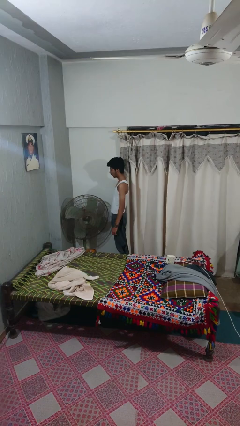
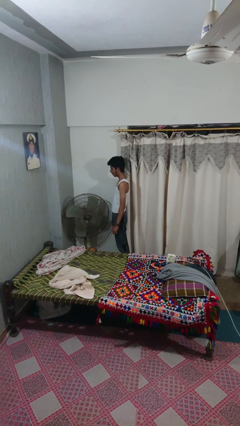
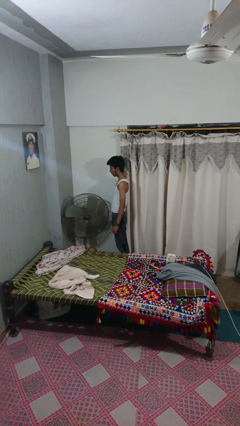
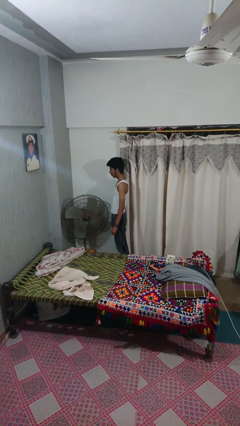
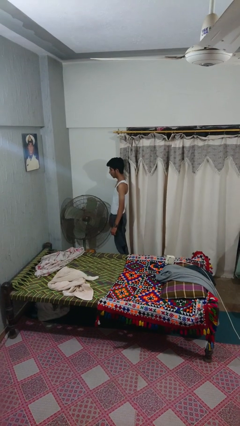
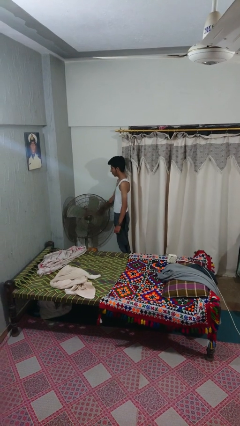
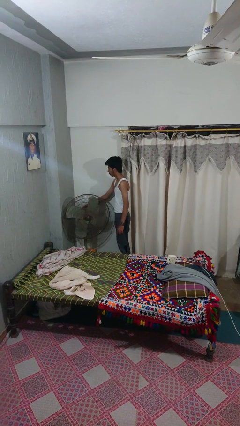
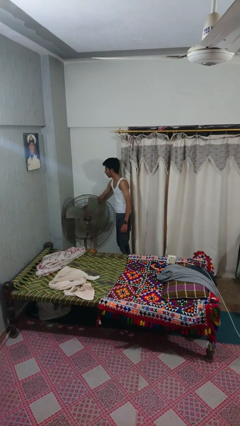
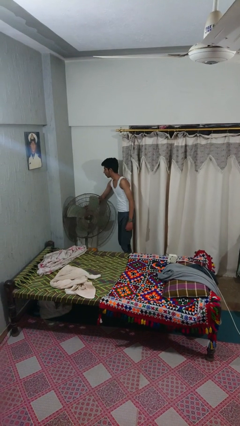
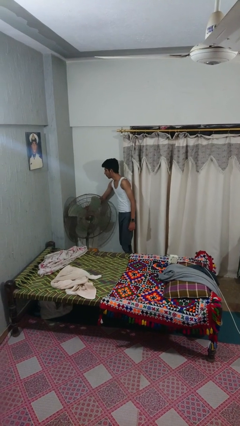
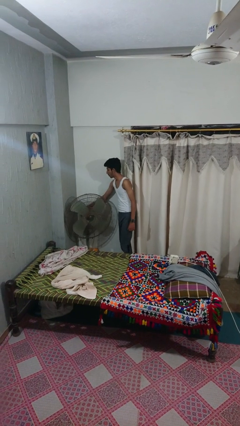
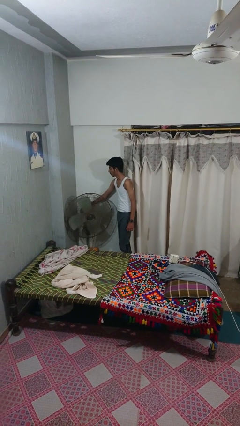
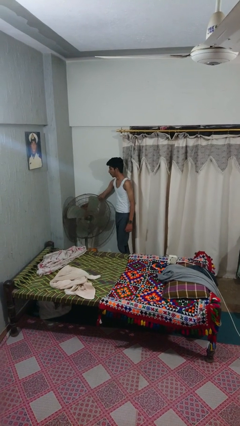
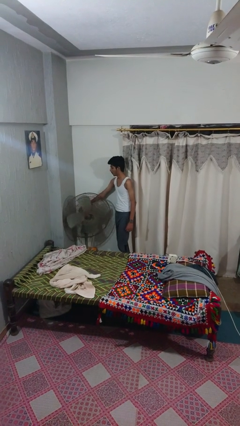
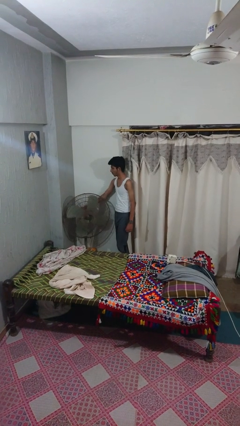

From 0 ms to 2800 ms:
person turns on fan

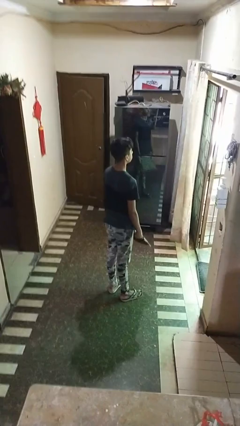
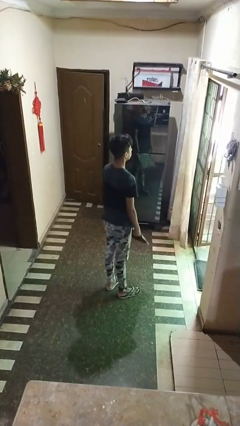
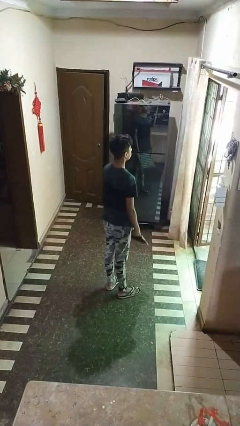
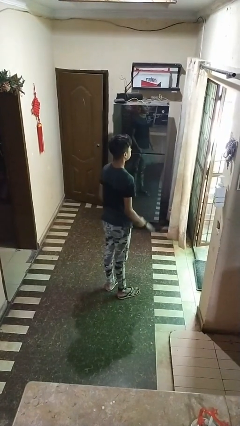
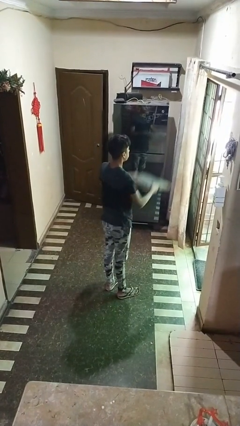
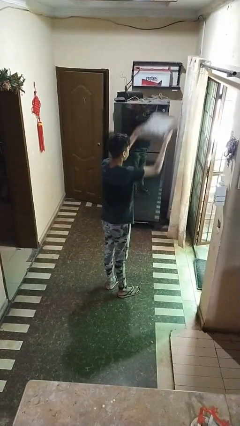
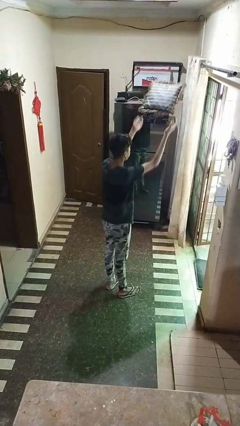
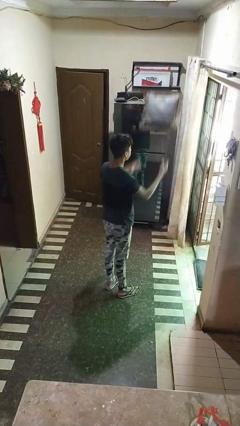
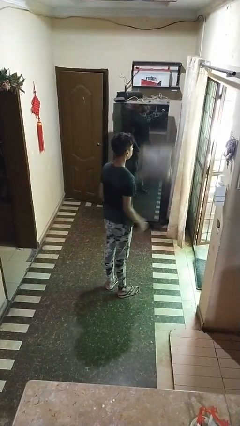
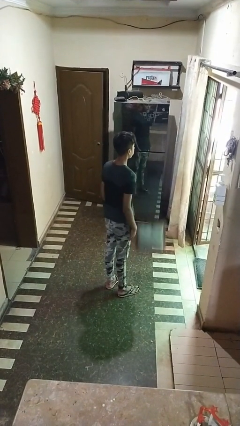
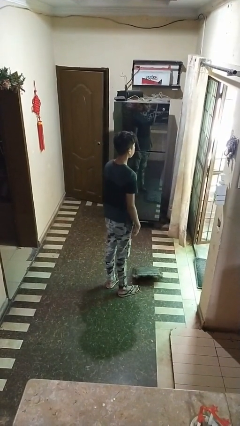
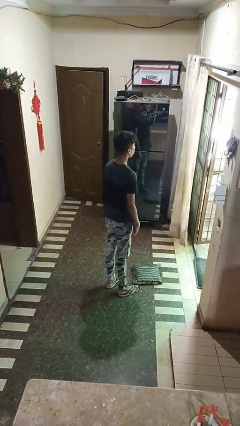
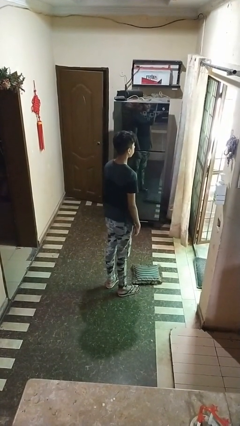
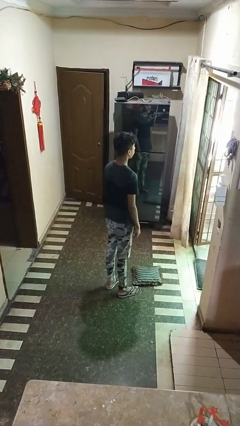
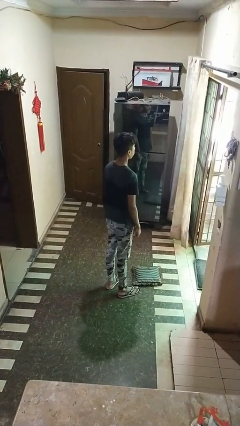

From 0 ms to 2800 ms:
person throws object into air

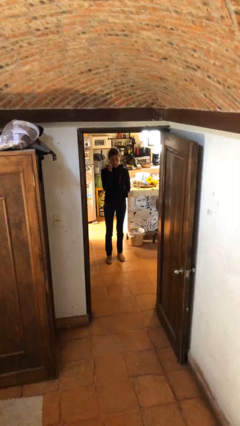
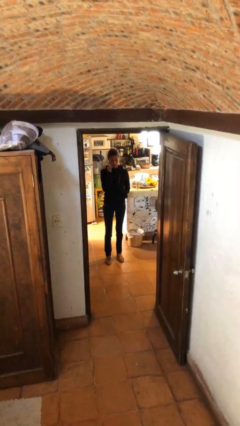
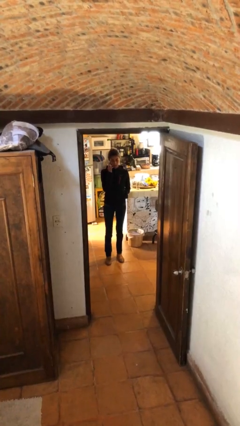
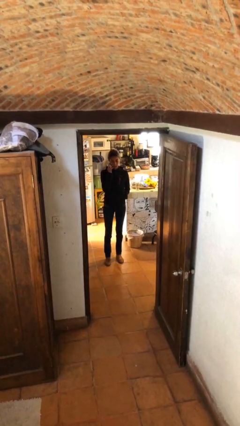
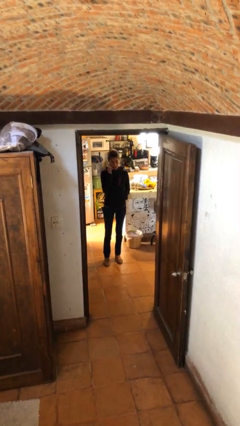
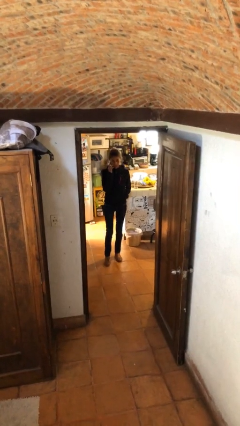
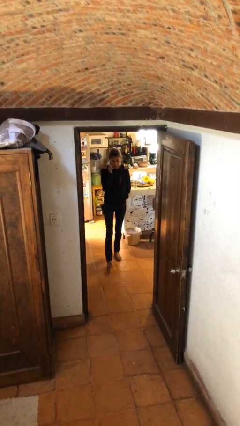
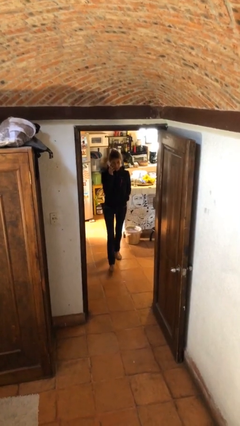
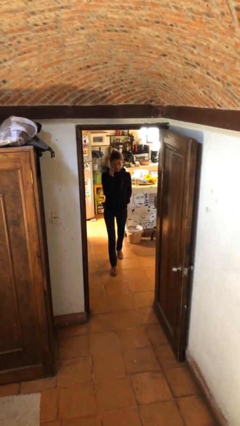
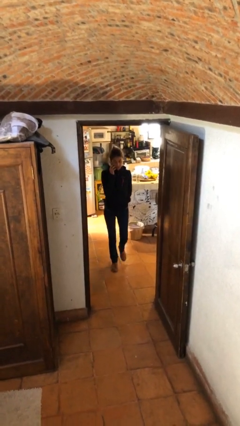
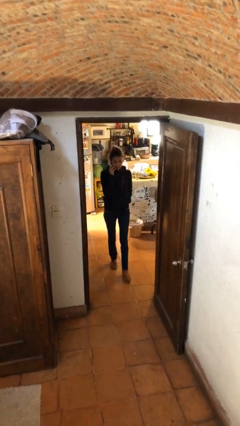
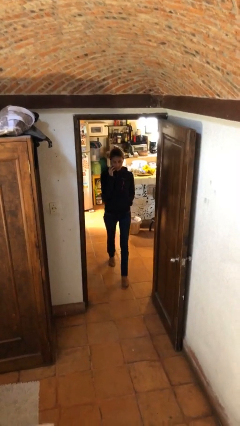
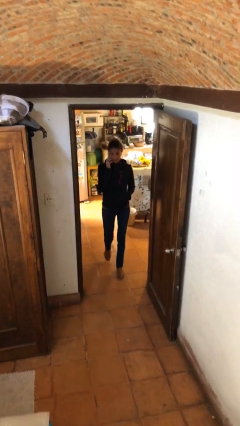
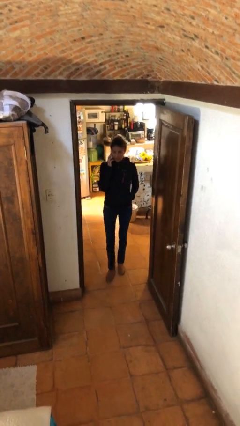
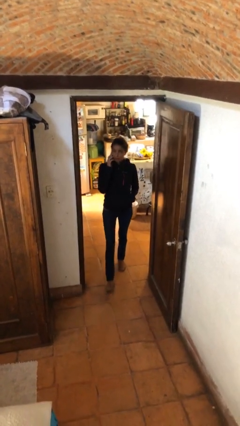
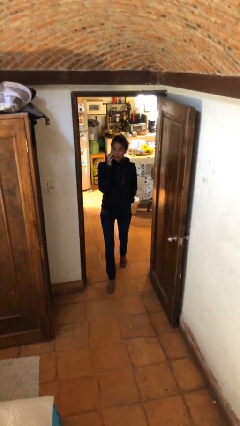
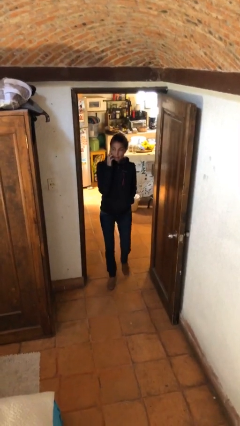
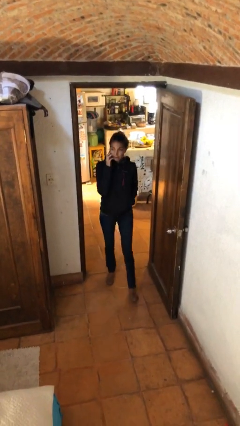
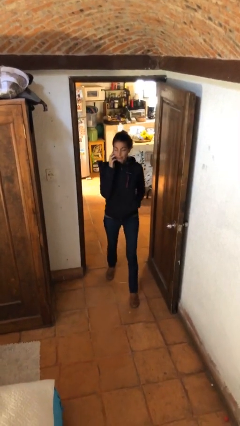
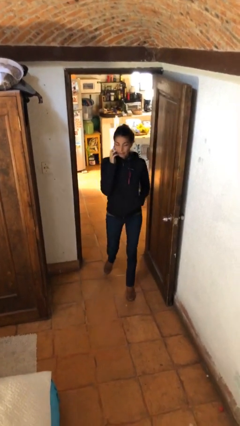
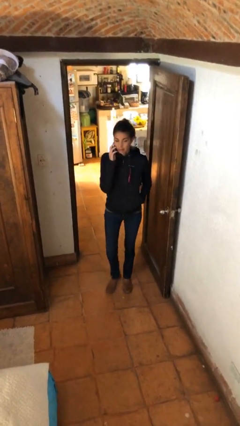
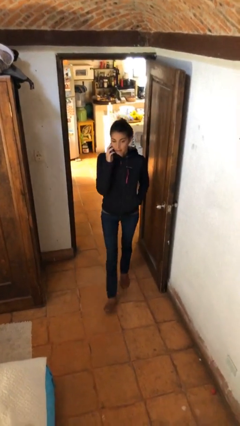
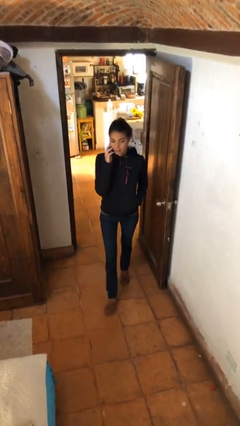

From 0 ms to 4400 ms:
person enters scene through structure

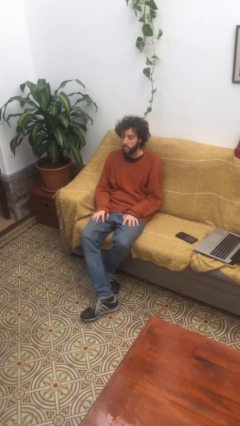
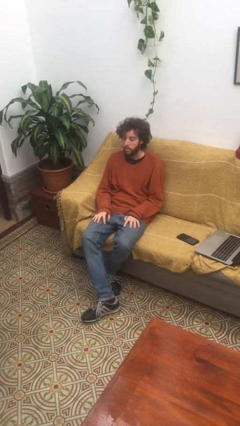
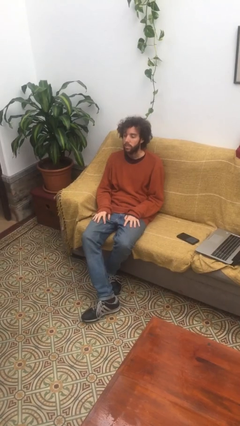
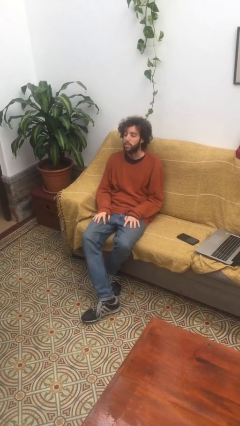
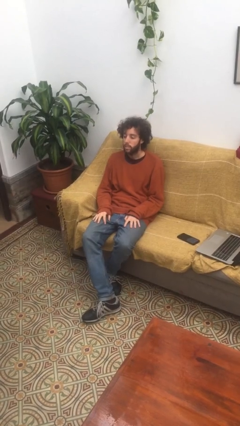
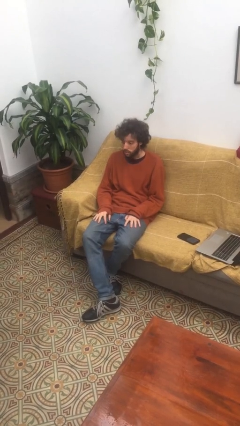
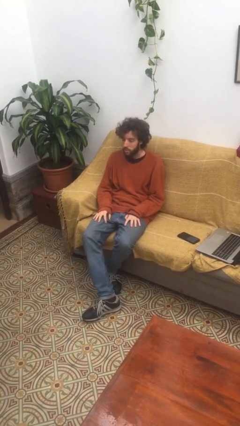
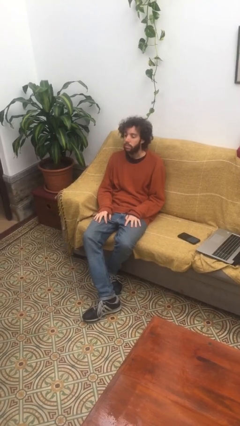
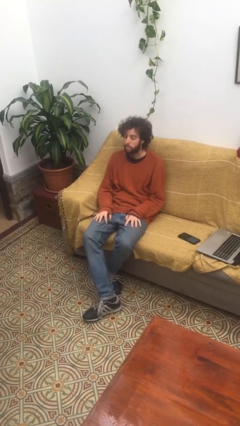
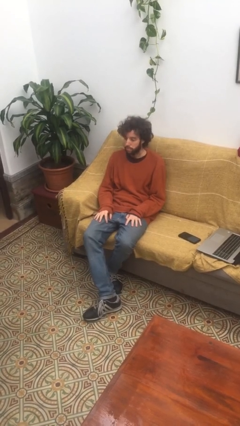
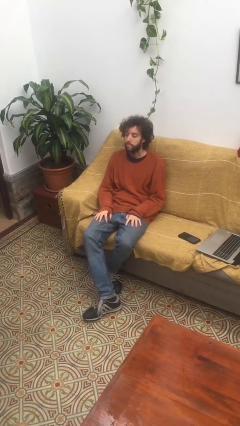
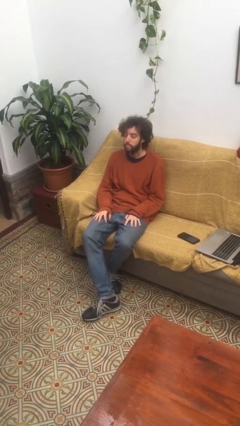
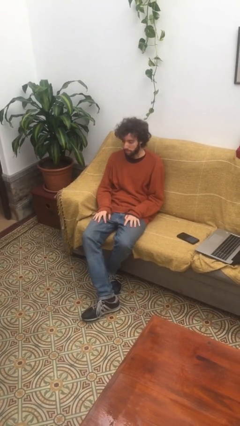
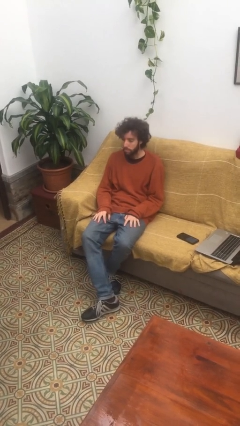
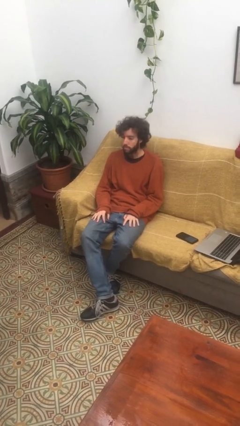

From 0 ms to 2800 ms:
person nods head

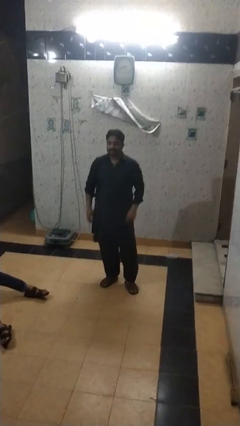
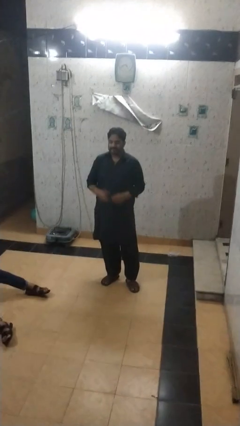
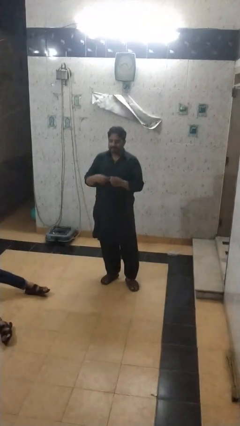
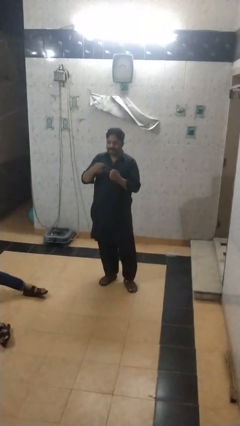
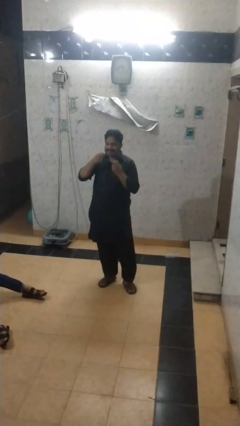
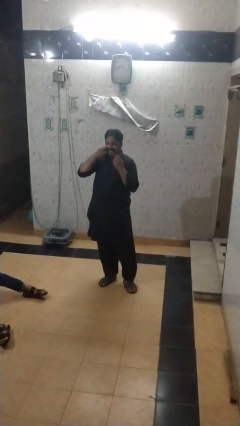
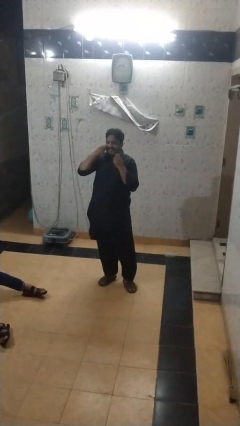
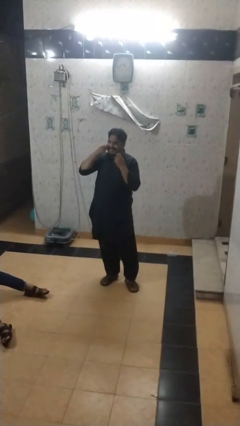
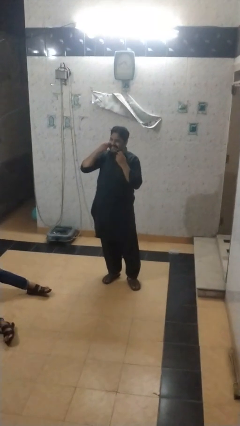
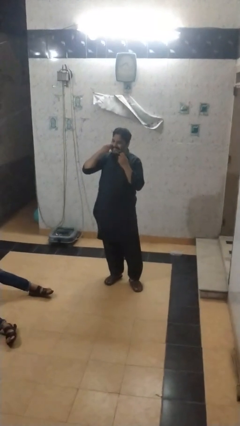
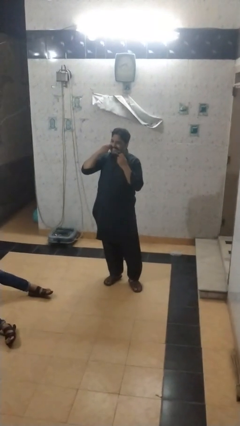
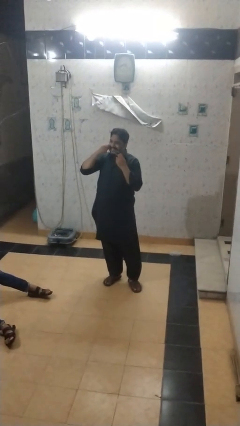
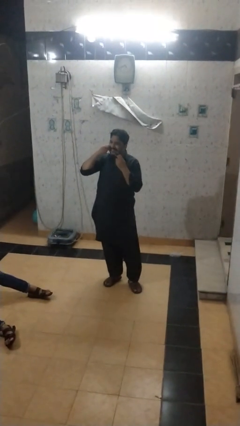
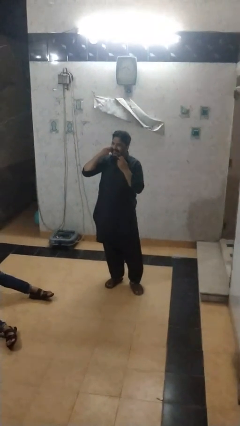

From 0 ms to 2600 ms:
person flosses

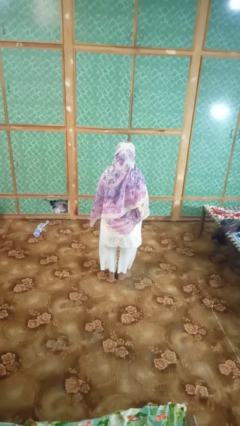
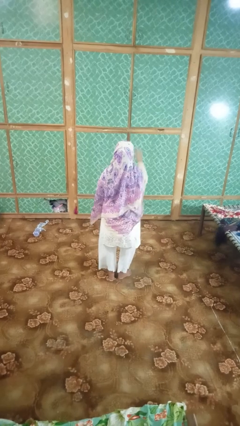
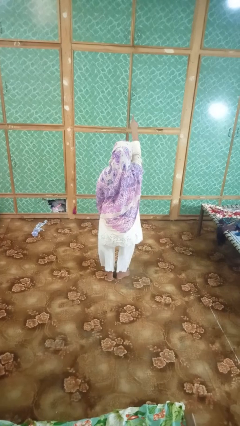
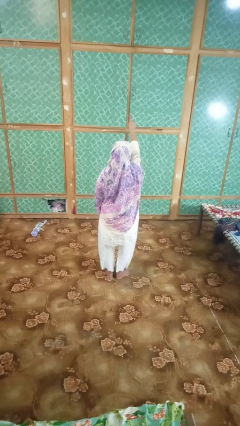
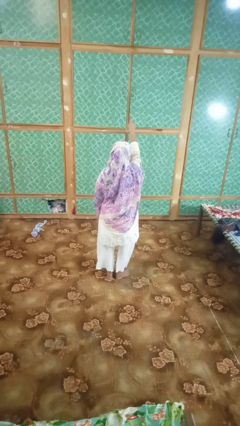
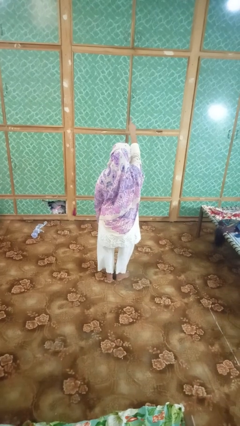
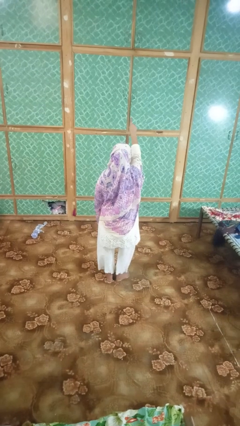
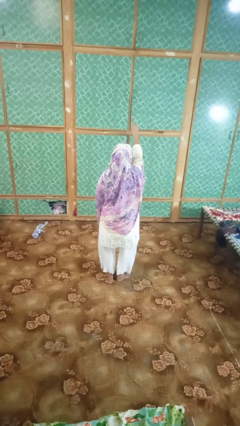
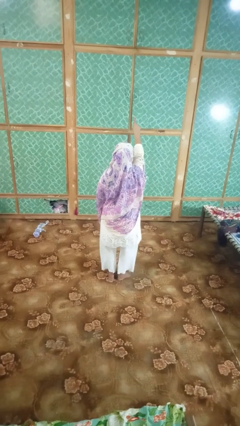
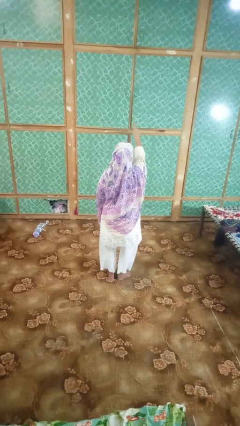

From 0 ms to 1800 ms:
person gestures number one

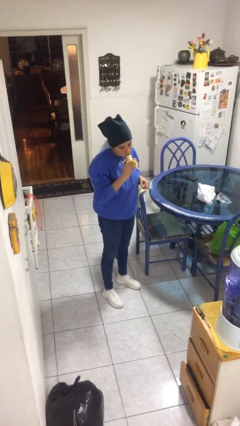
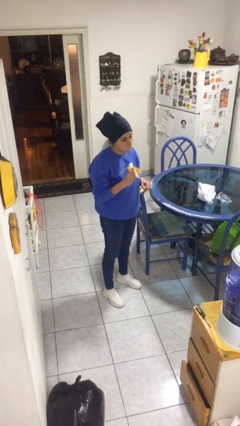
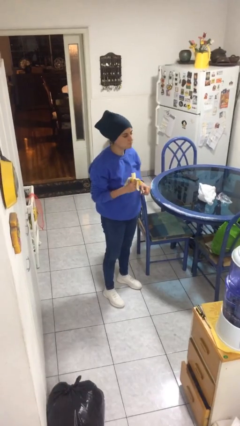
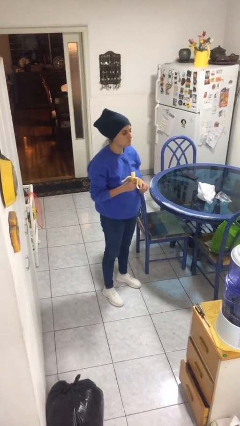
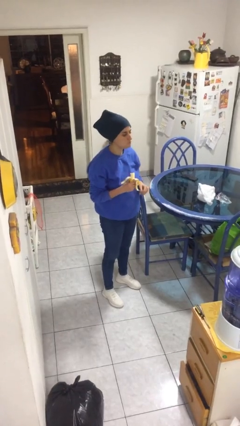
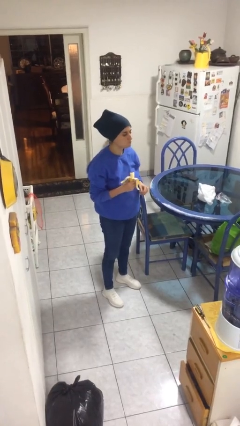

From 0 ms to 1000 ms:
person eats banana
